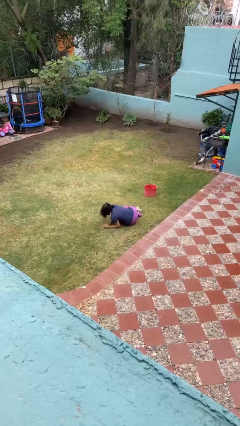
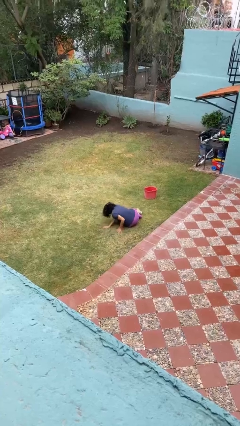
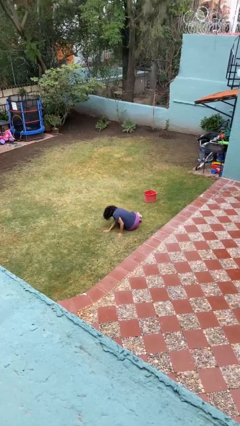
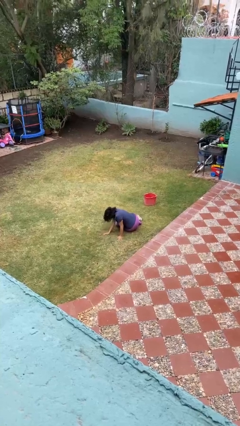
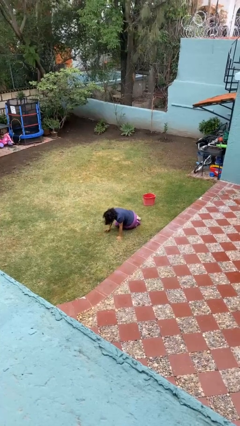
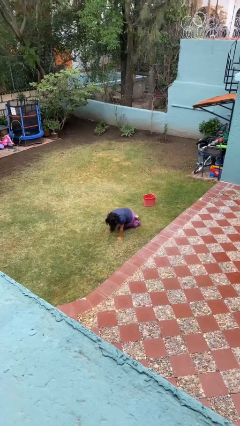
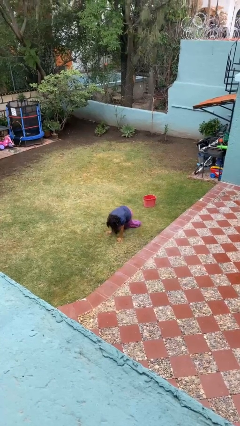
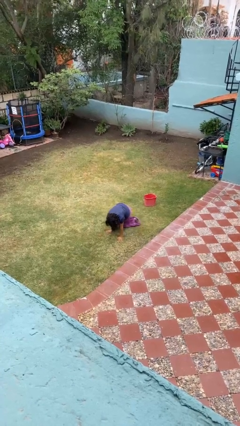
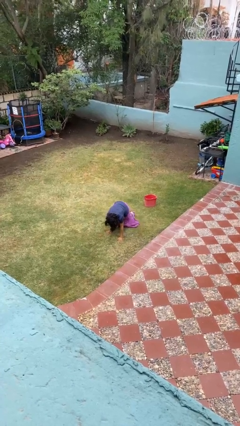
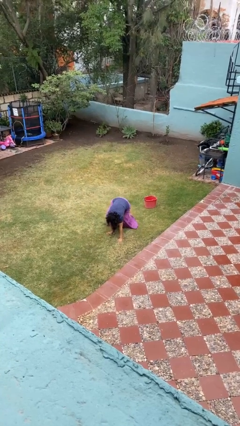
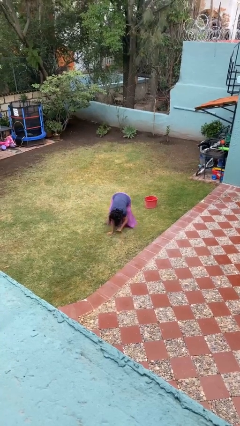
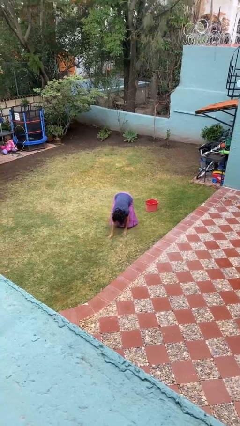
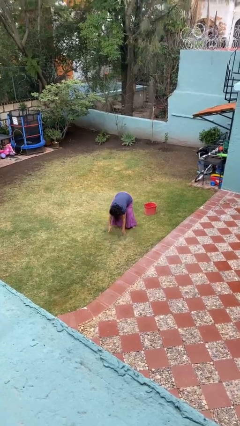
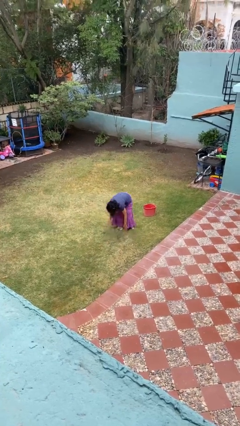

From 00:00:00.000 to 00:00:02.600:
person stands up from floor

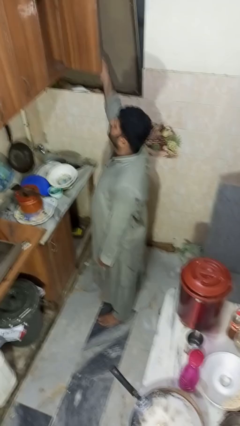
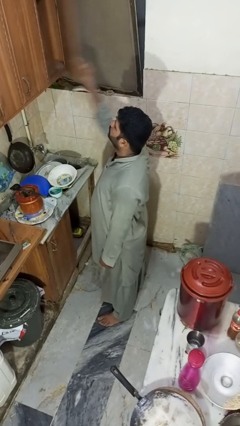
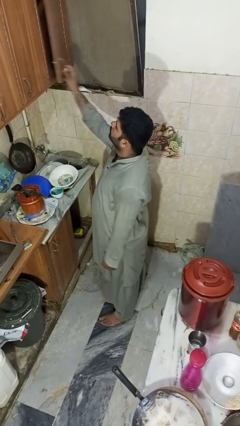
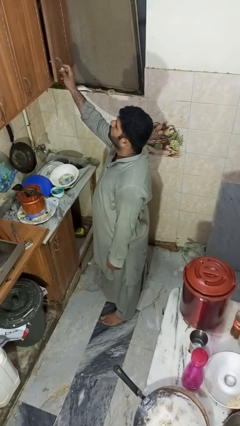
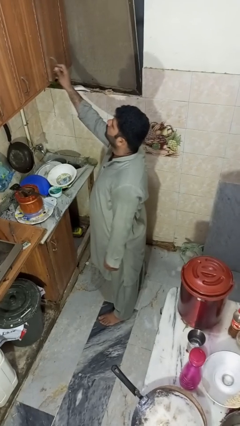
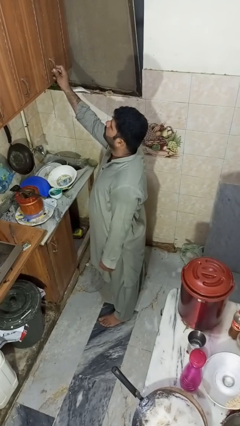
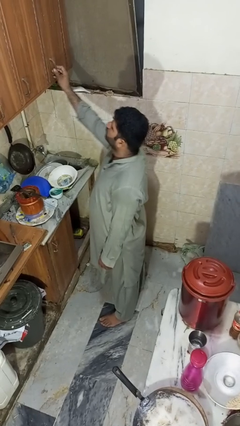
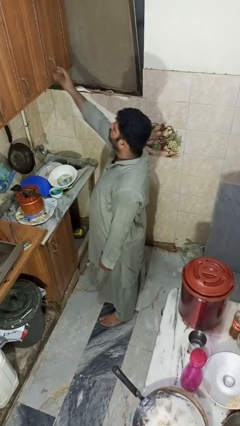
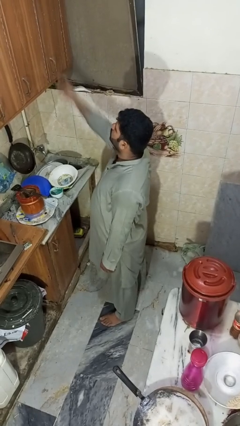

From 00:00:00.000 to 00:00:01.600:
person closes cabinet

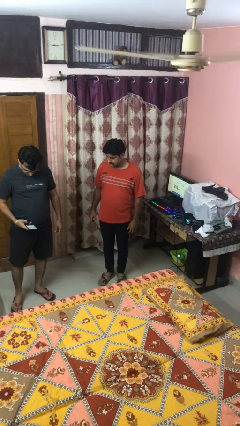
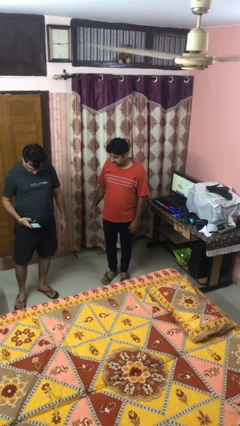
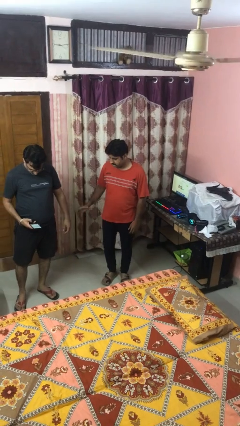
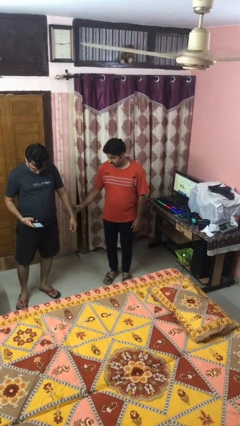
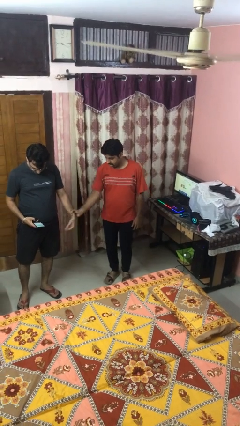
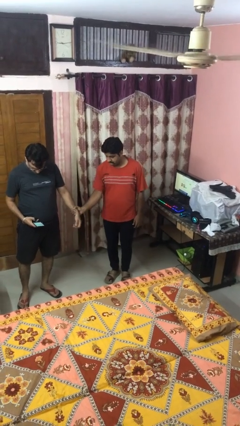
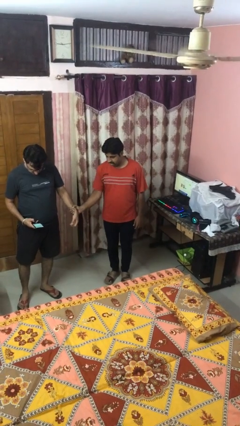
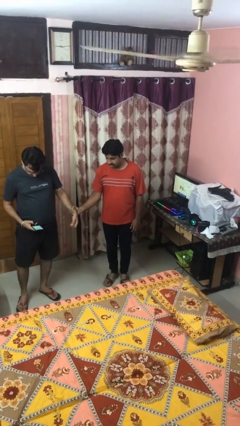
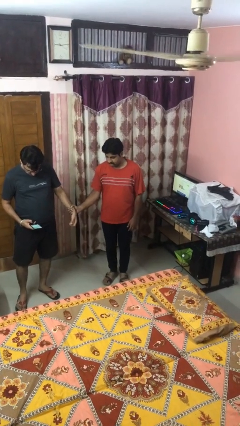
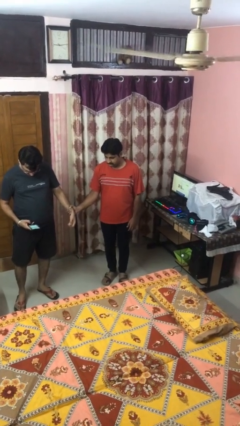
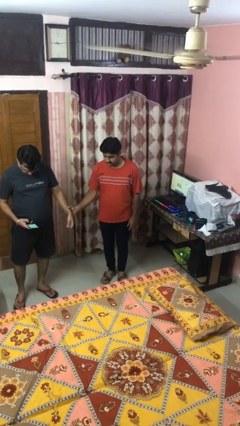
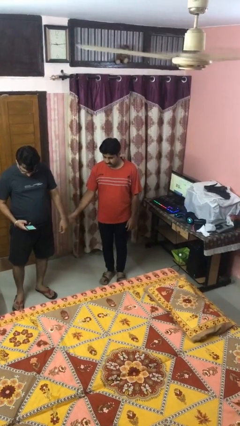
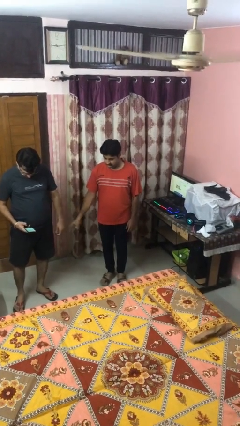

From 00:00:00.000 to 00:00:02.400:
person grabs person by forearm

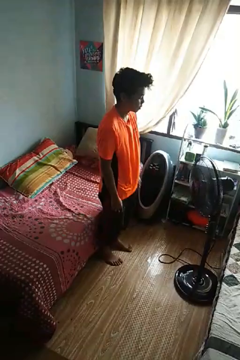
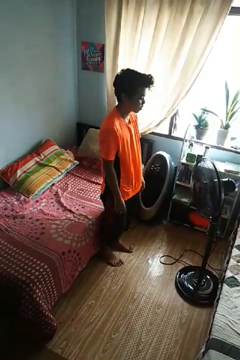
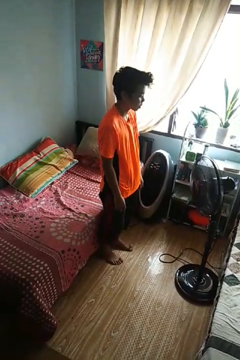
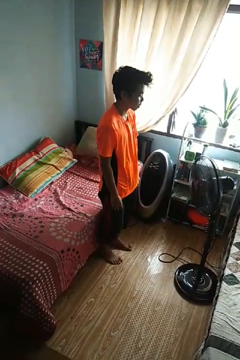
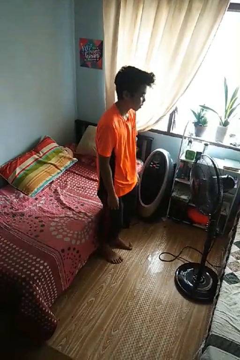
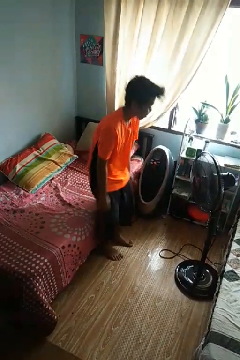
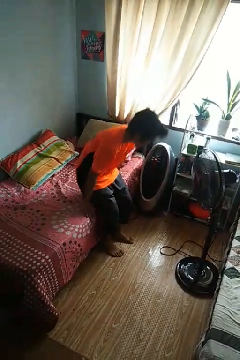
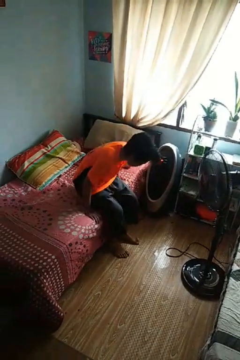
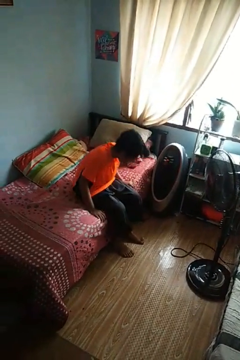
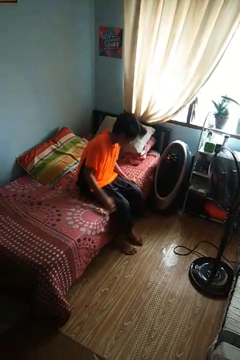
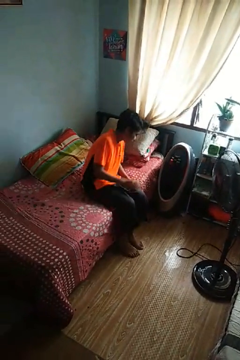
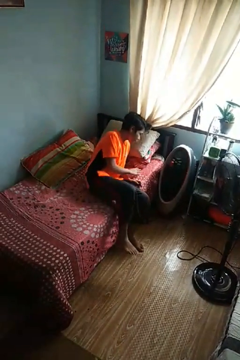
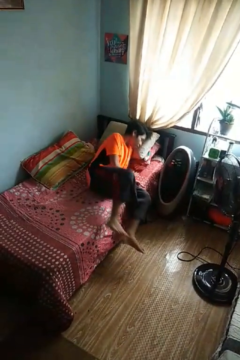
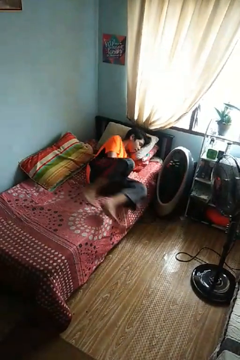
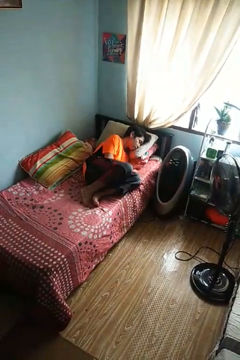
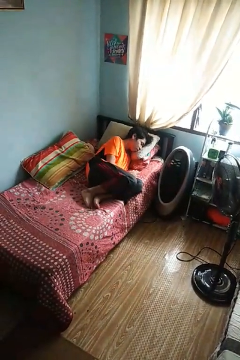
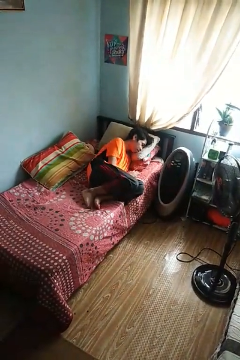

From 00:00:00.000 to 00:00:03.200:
person lies down on bed

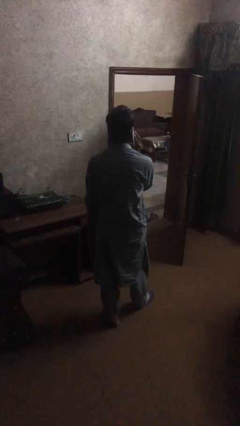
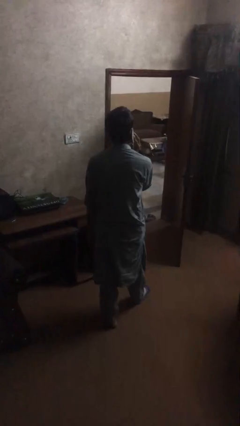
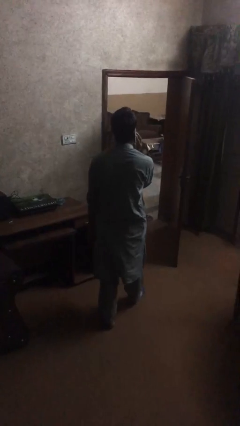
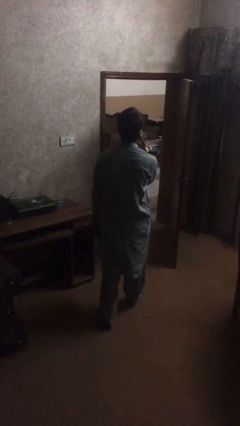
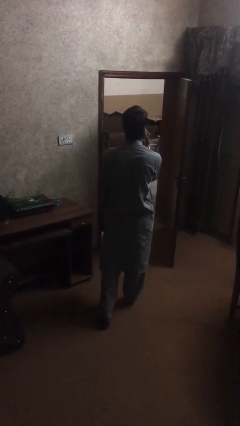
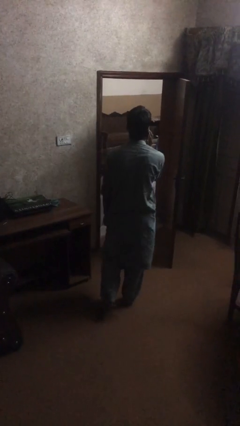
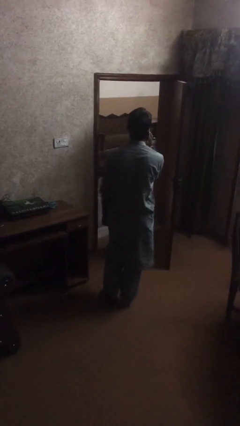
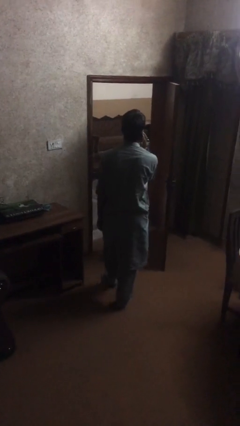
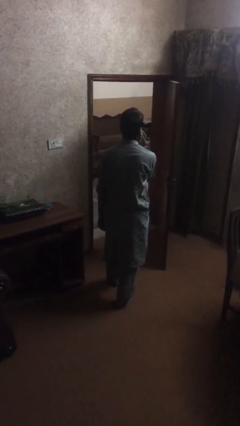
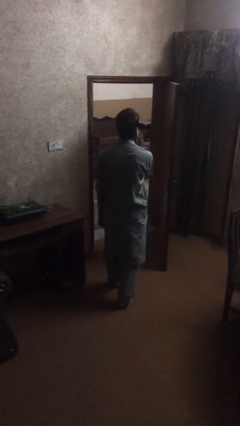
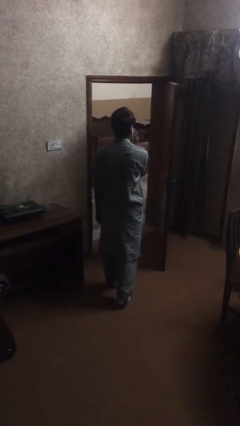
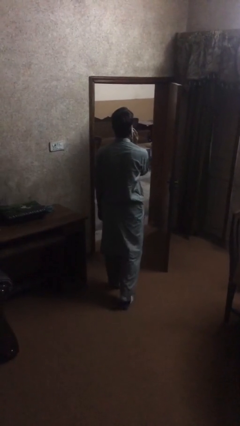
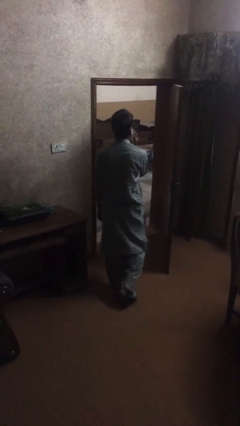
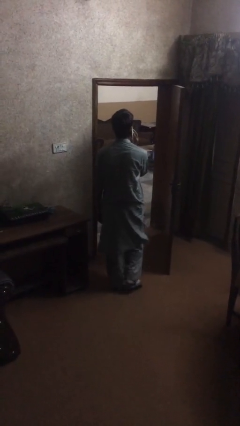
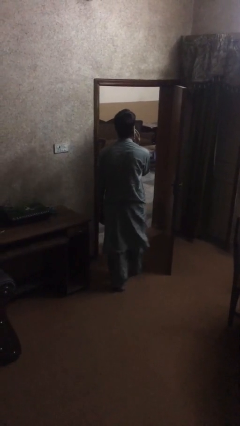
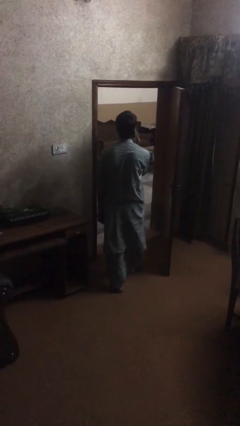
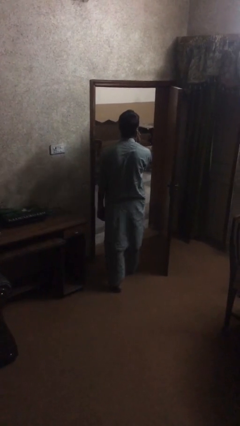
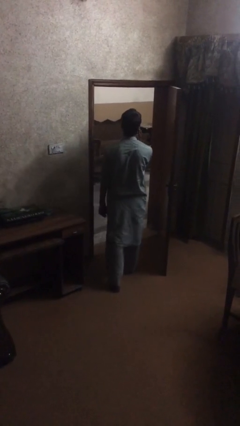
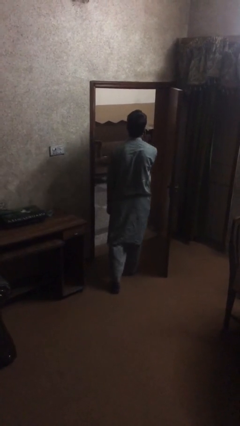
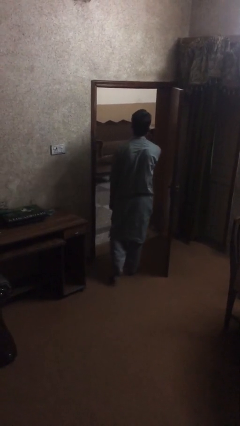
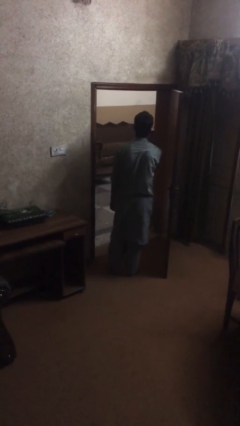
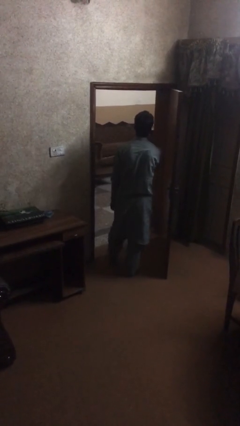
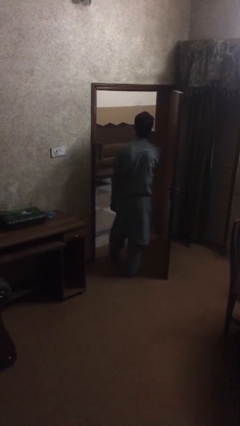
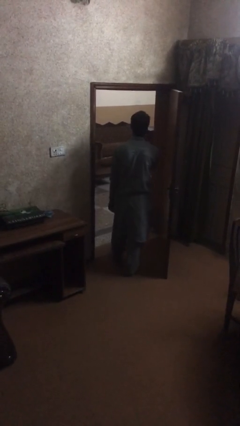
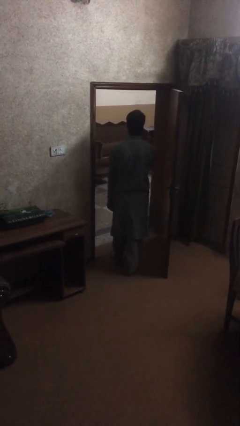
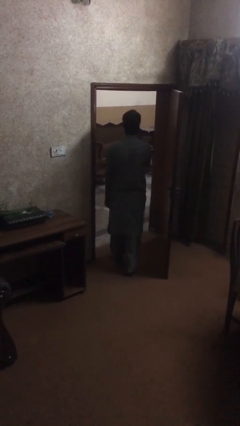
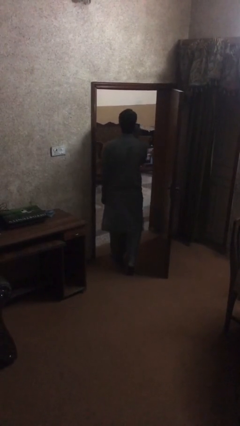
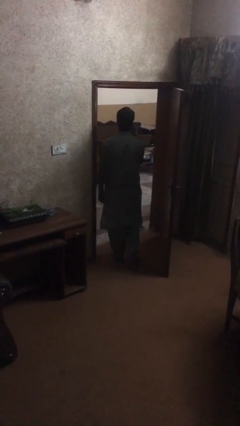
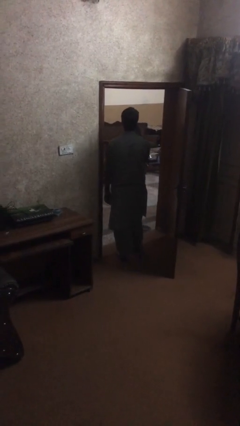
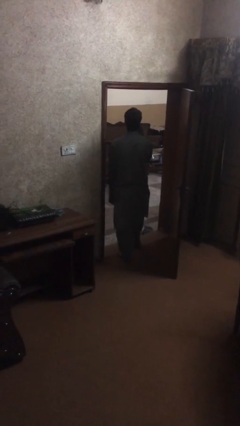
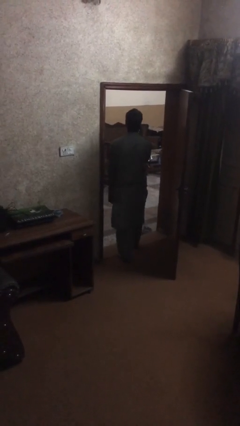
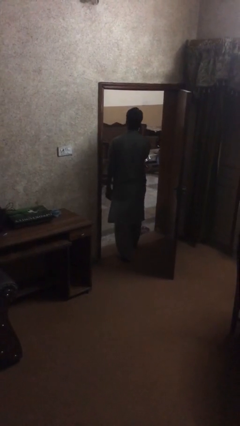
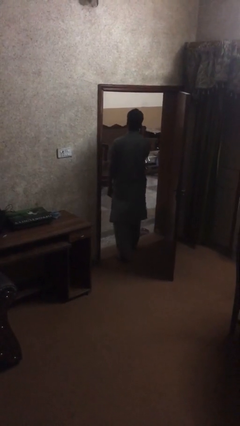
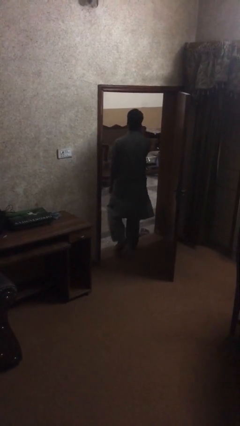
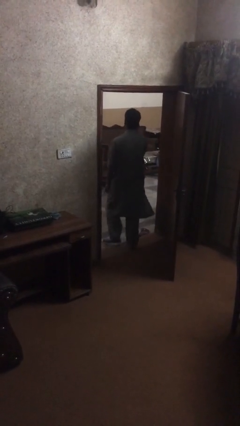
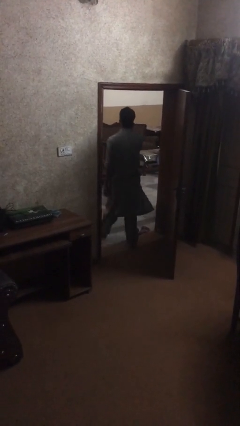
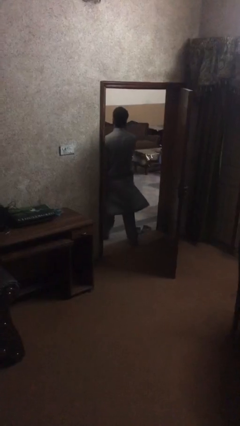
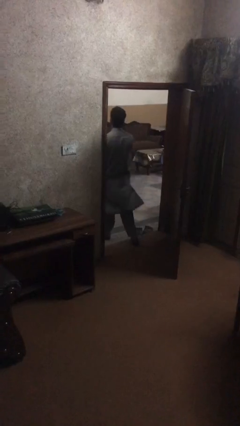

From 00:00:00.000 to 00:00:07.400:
person exits scene through structure

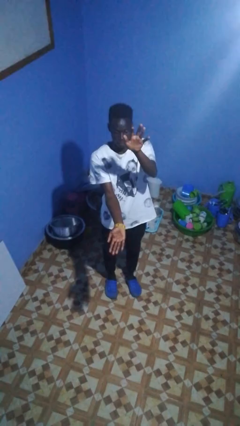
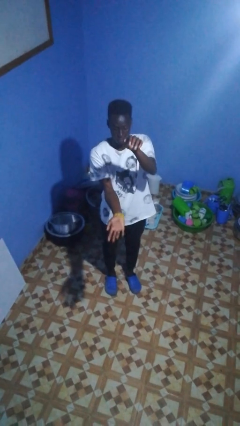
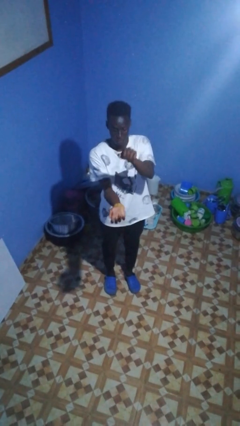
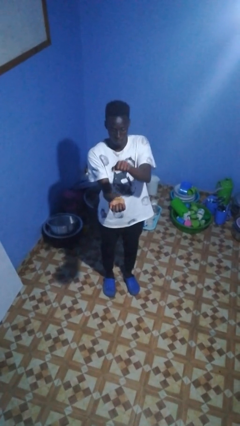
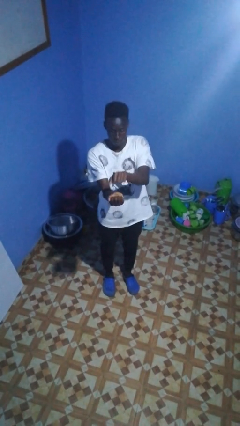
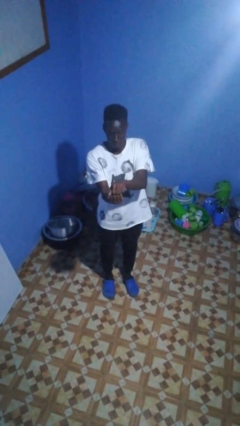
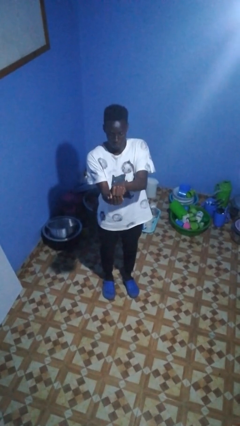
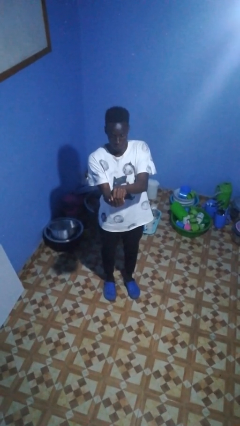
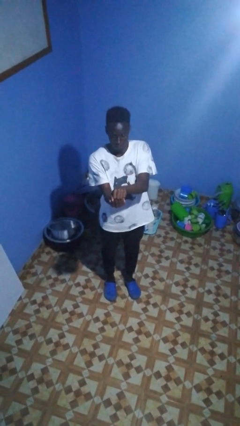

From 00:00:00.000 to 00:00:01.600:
person gestures zoom out
